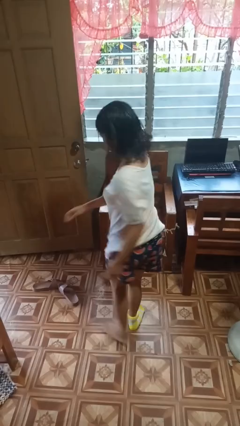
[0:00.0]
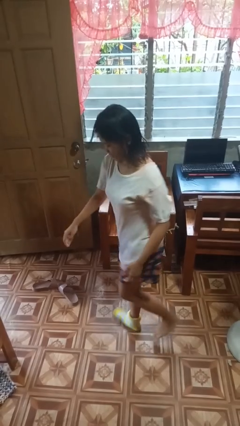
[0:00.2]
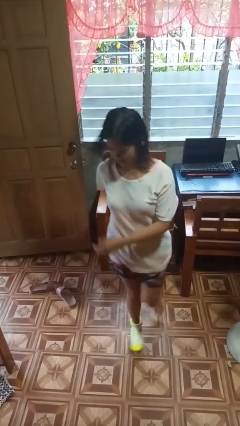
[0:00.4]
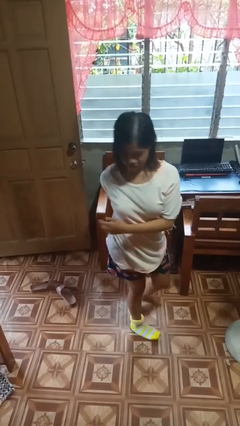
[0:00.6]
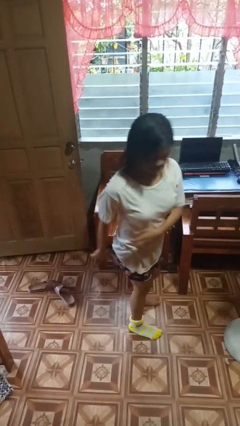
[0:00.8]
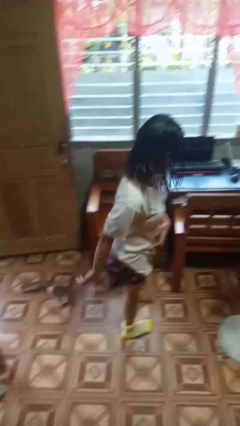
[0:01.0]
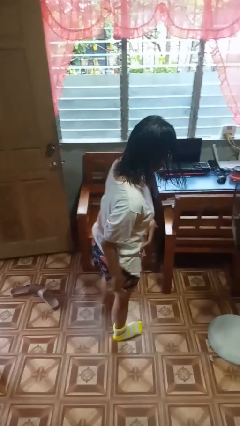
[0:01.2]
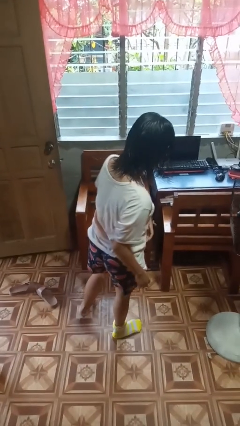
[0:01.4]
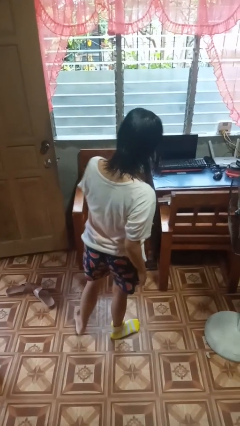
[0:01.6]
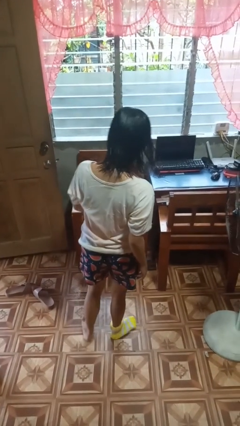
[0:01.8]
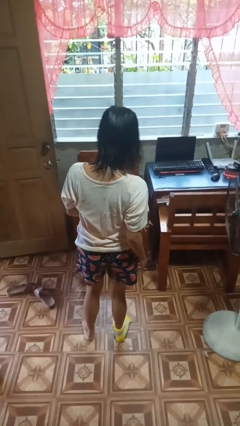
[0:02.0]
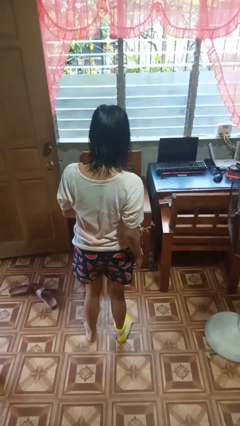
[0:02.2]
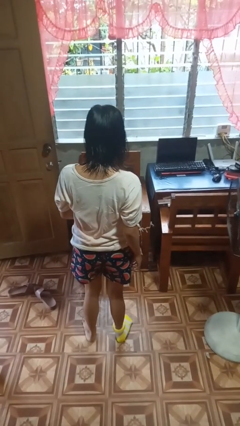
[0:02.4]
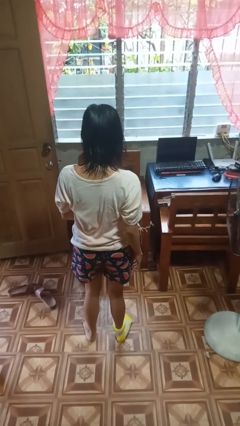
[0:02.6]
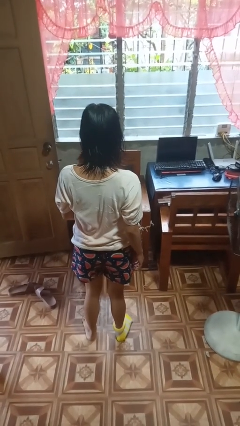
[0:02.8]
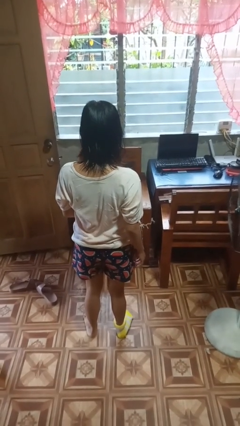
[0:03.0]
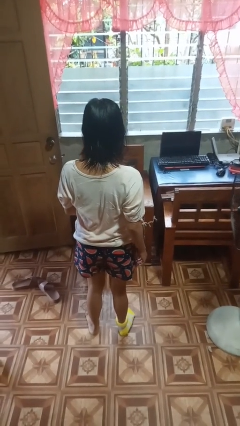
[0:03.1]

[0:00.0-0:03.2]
person twirls

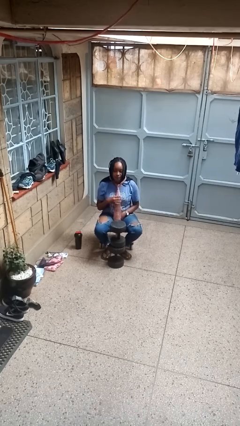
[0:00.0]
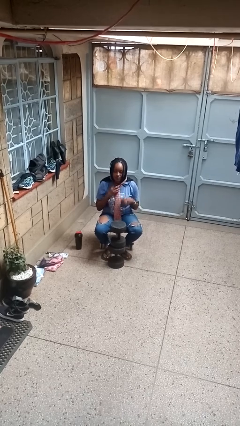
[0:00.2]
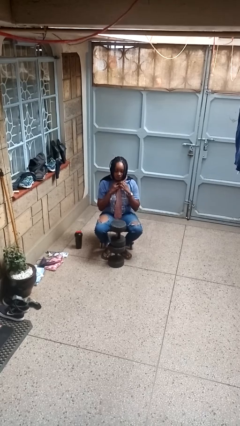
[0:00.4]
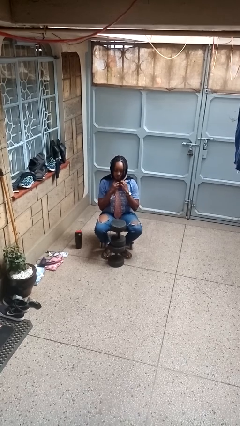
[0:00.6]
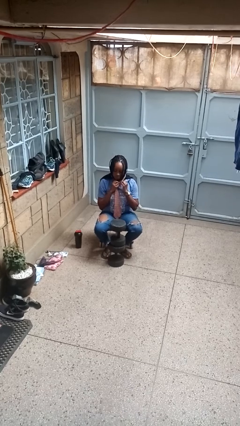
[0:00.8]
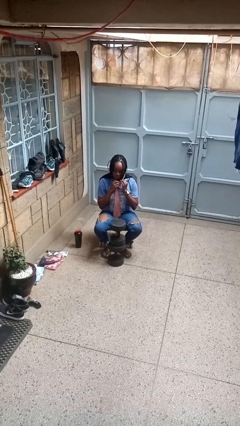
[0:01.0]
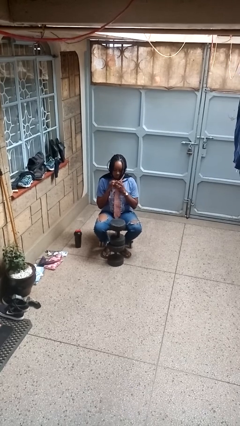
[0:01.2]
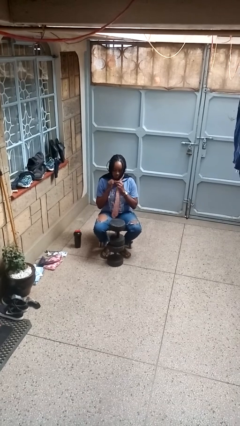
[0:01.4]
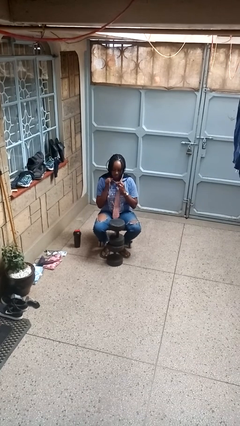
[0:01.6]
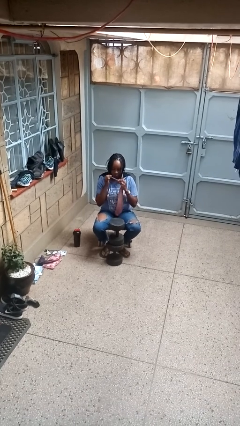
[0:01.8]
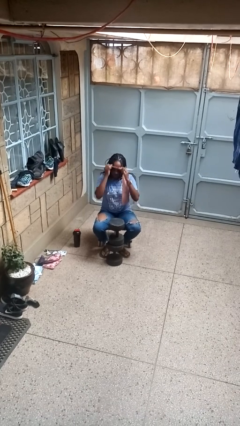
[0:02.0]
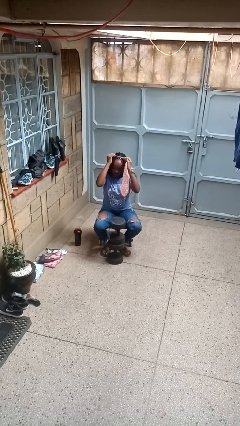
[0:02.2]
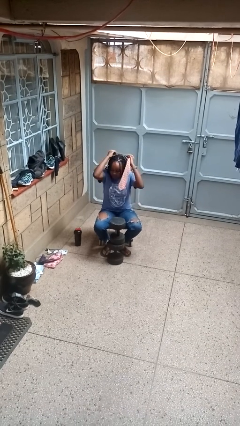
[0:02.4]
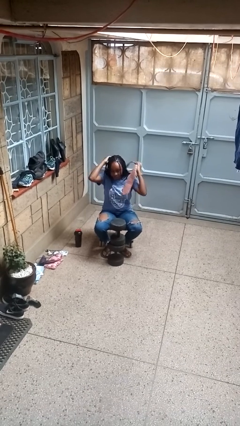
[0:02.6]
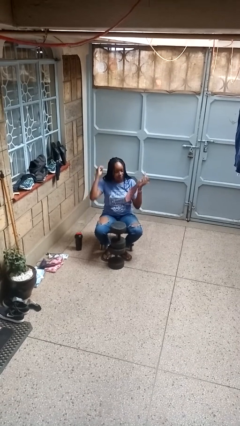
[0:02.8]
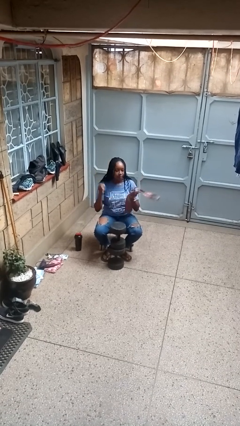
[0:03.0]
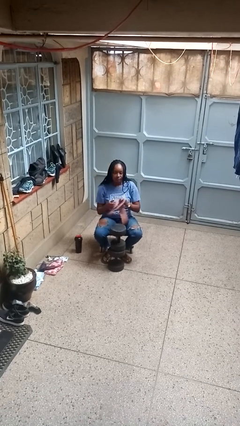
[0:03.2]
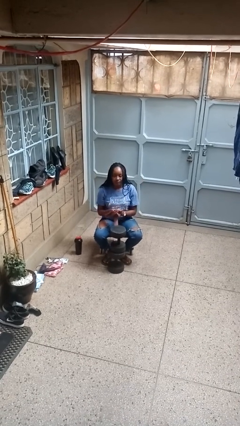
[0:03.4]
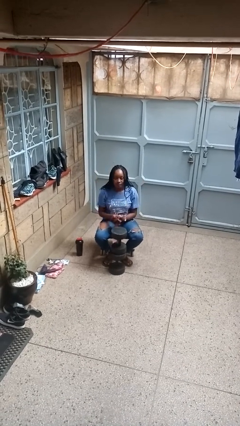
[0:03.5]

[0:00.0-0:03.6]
person takes off necktie

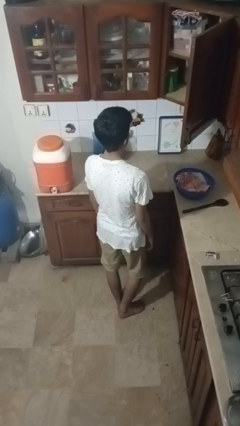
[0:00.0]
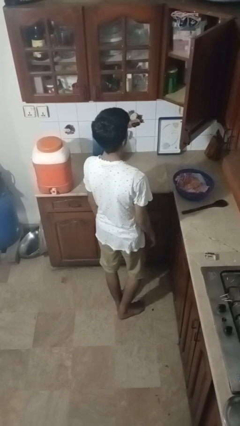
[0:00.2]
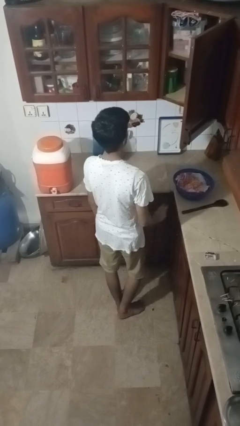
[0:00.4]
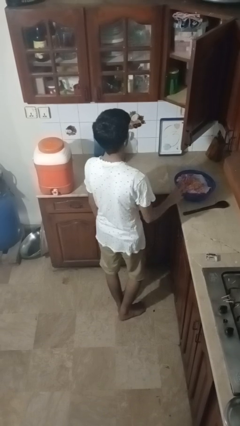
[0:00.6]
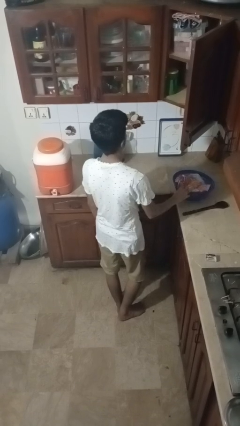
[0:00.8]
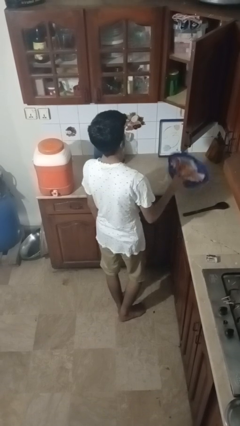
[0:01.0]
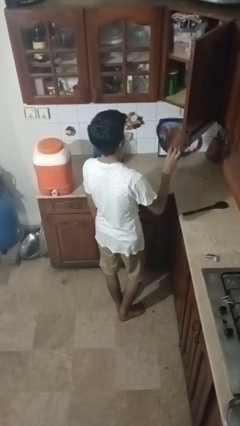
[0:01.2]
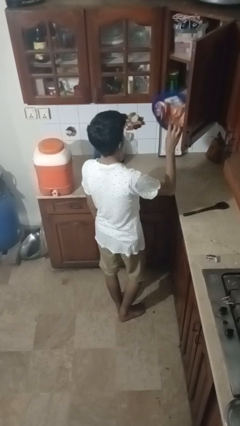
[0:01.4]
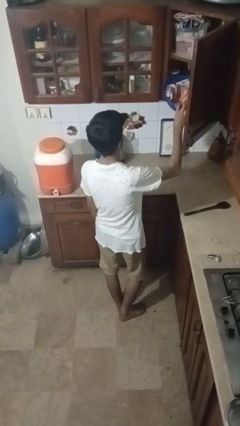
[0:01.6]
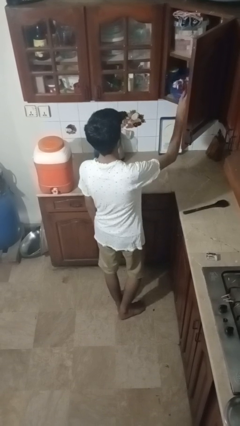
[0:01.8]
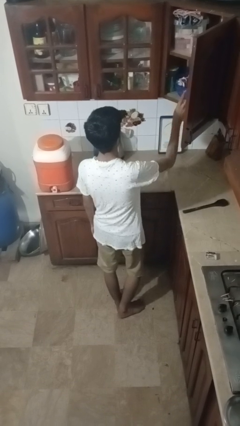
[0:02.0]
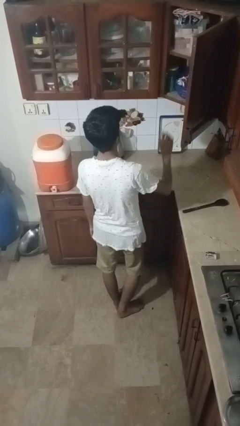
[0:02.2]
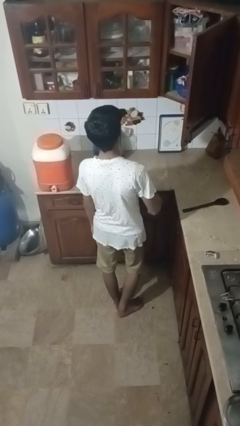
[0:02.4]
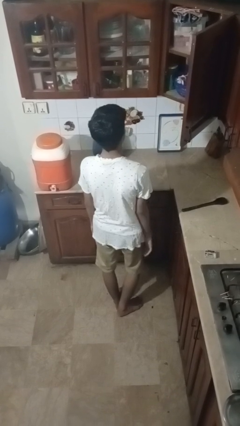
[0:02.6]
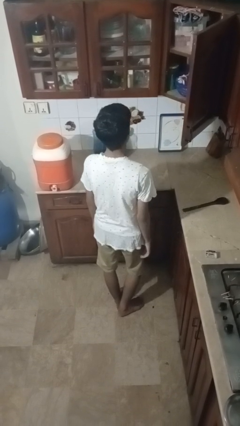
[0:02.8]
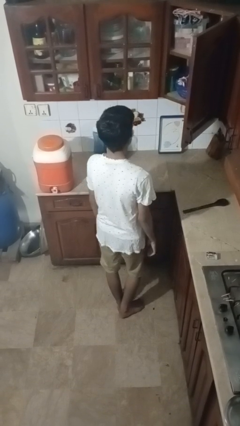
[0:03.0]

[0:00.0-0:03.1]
person puts object in cabinet

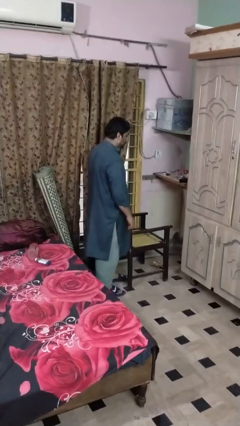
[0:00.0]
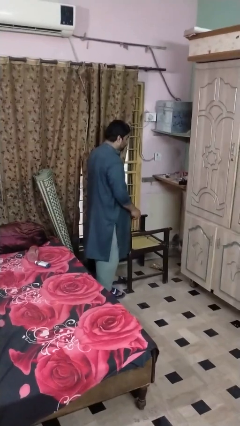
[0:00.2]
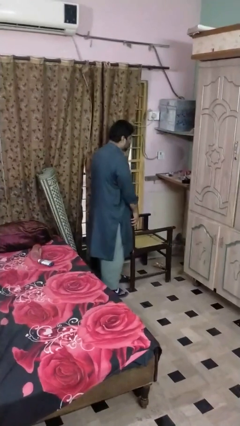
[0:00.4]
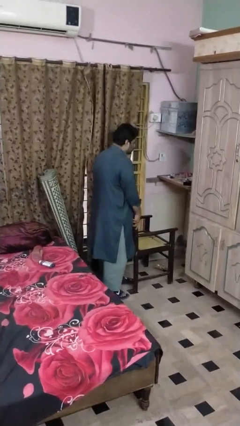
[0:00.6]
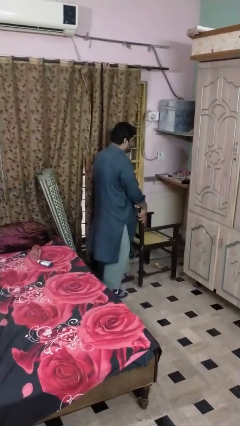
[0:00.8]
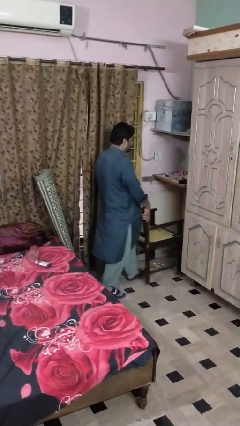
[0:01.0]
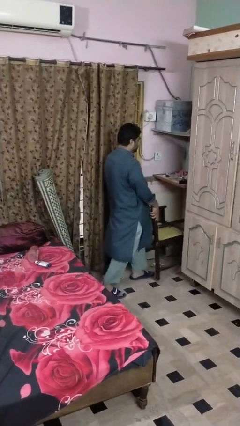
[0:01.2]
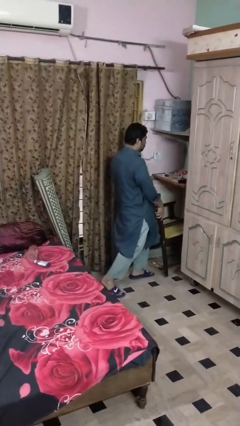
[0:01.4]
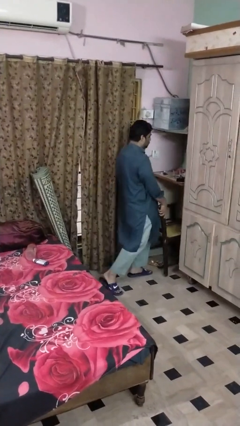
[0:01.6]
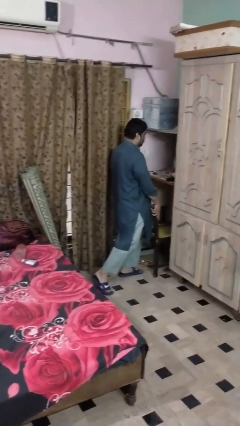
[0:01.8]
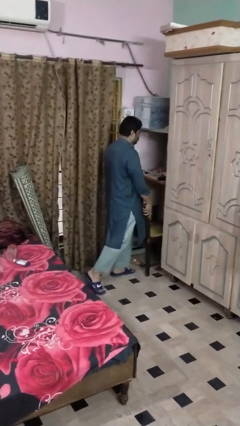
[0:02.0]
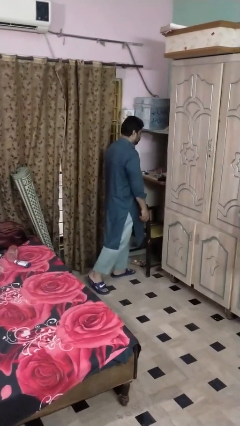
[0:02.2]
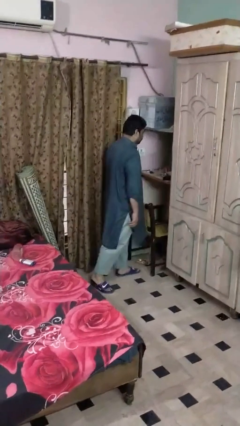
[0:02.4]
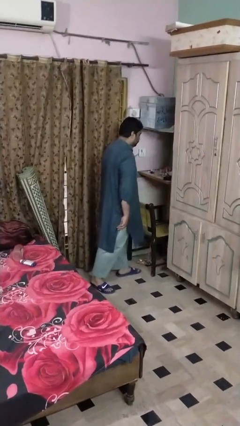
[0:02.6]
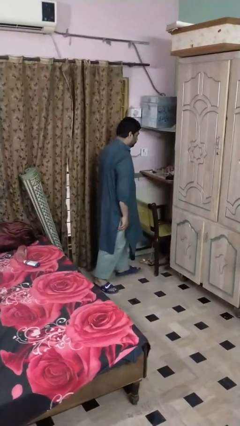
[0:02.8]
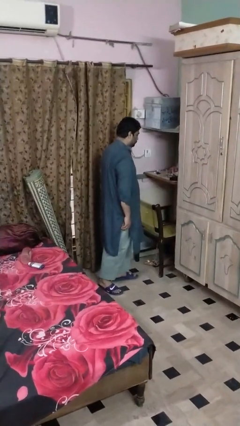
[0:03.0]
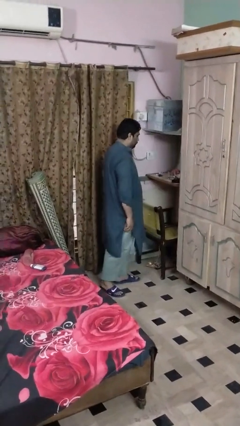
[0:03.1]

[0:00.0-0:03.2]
person pushes in chair

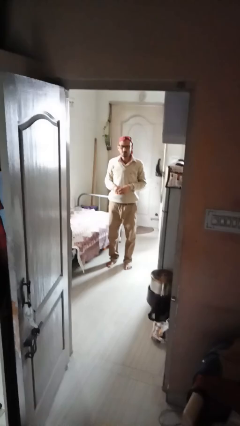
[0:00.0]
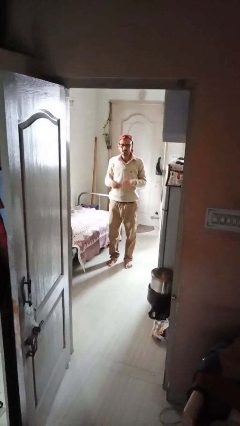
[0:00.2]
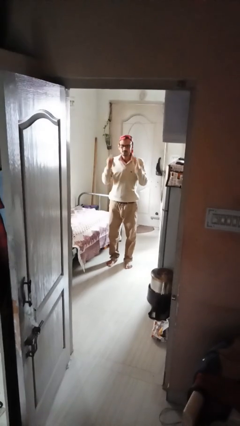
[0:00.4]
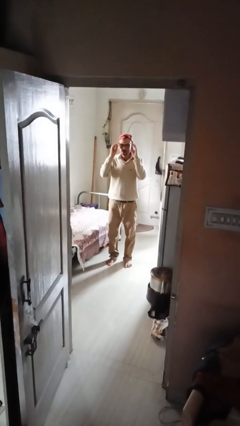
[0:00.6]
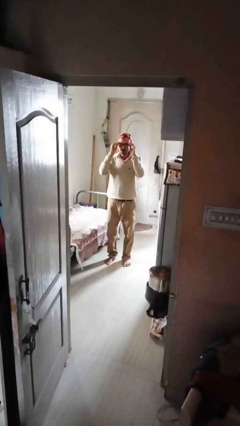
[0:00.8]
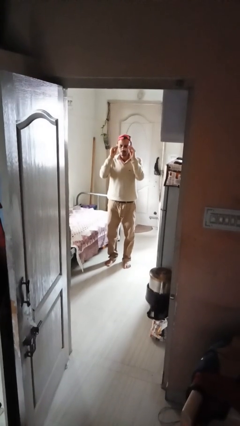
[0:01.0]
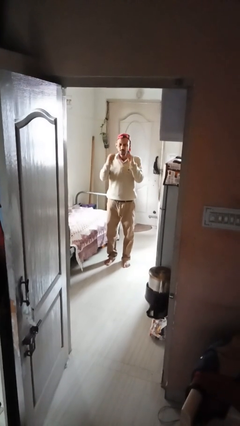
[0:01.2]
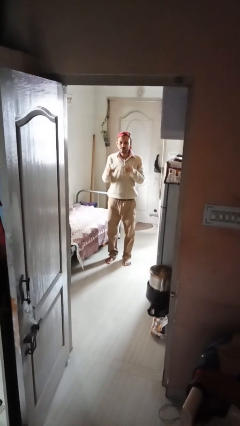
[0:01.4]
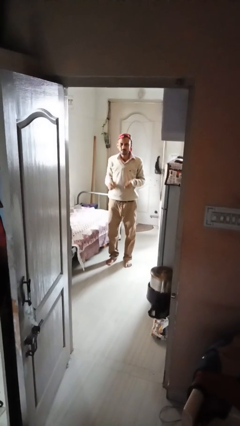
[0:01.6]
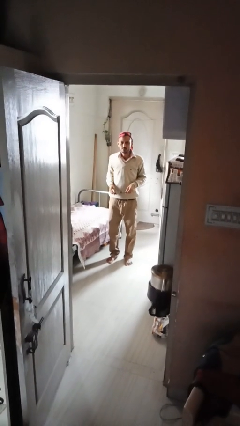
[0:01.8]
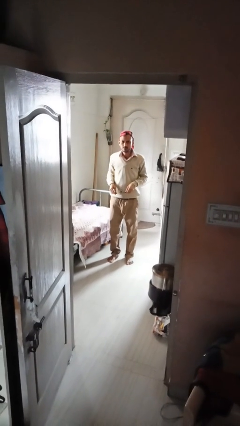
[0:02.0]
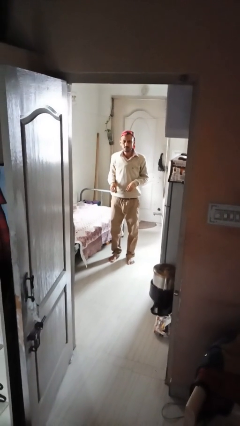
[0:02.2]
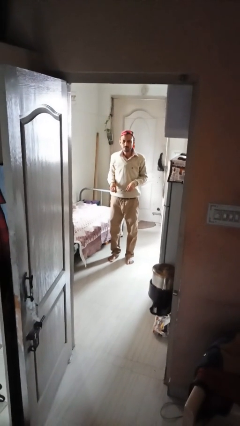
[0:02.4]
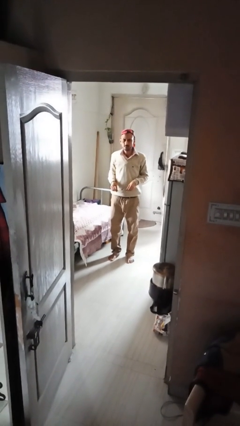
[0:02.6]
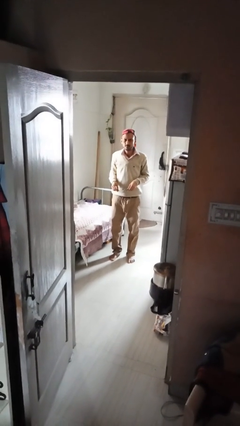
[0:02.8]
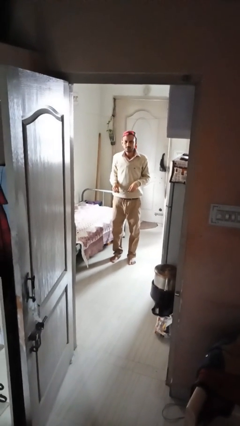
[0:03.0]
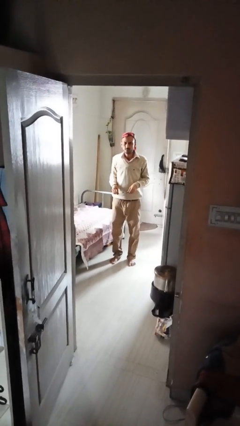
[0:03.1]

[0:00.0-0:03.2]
person takes off sunglasses

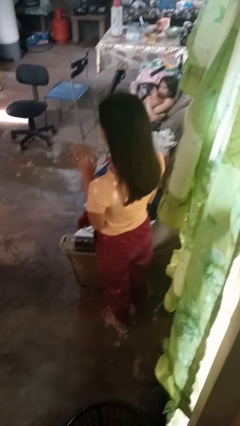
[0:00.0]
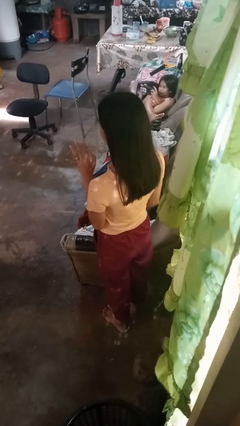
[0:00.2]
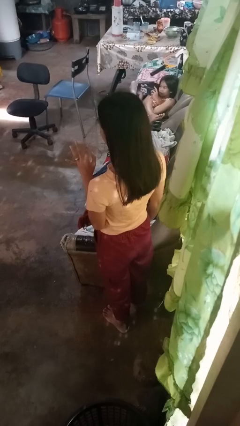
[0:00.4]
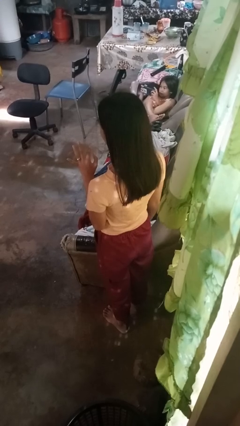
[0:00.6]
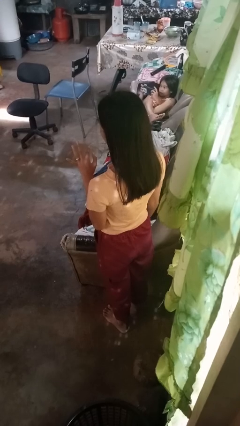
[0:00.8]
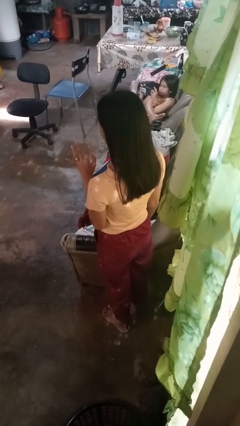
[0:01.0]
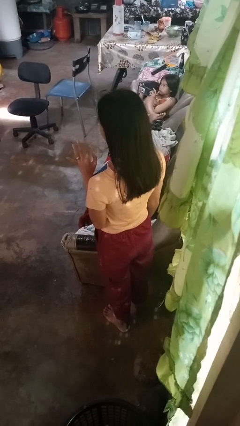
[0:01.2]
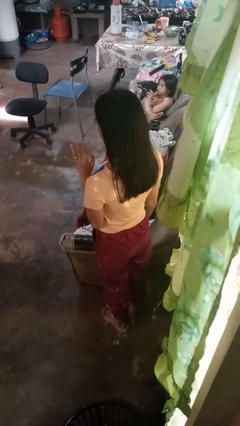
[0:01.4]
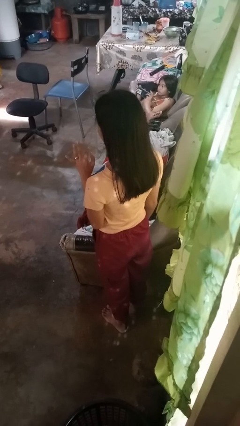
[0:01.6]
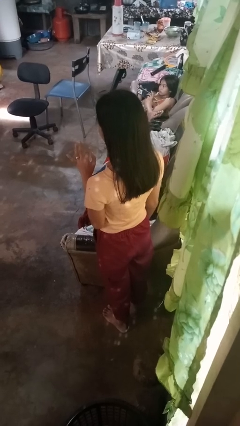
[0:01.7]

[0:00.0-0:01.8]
person puts on ring
